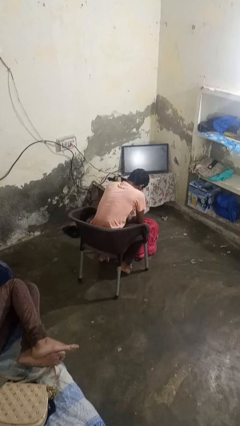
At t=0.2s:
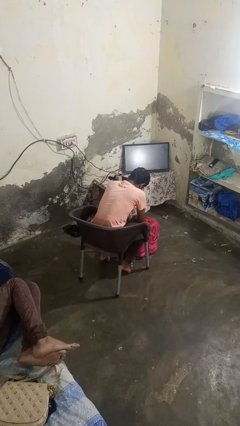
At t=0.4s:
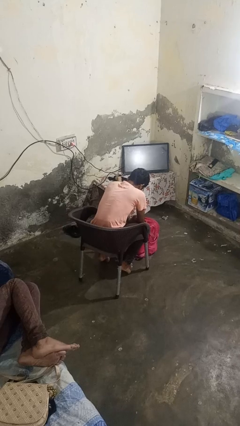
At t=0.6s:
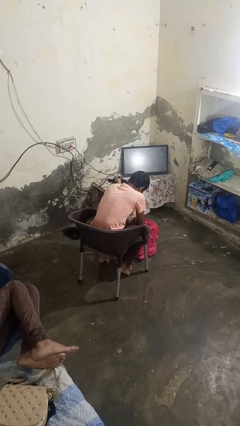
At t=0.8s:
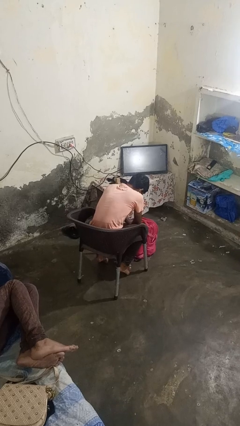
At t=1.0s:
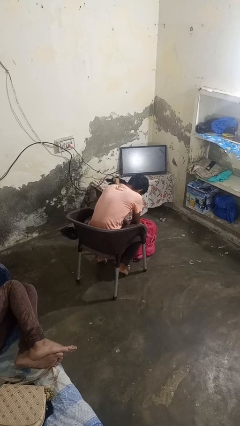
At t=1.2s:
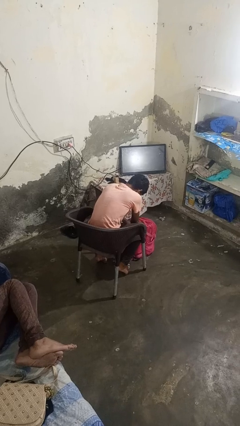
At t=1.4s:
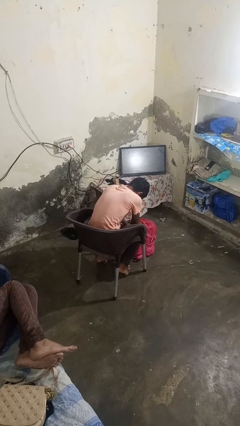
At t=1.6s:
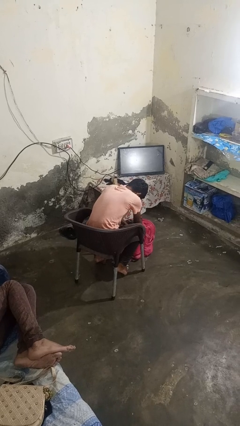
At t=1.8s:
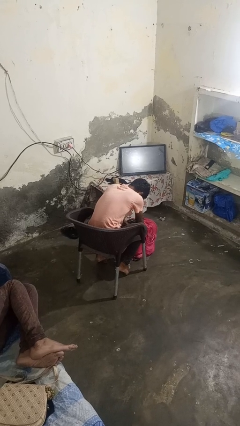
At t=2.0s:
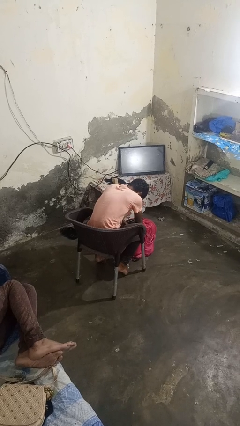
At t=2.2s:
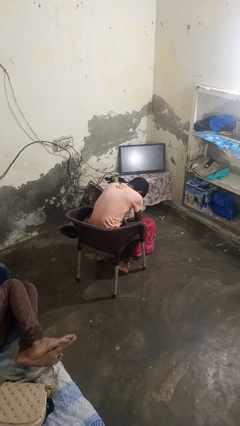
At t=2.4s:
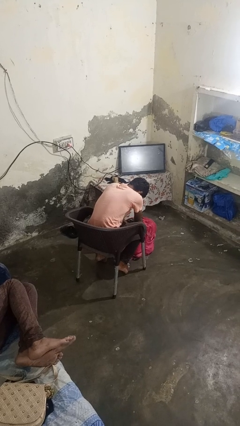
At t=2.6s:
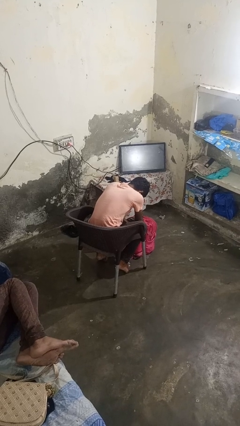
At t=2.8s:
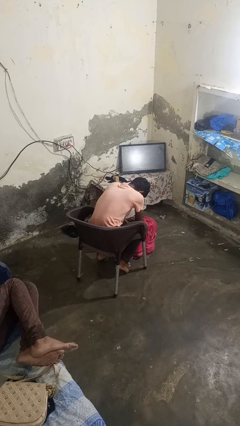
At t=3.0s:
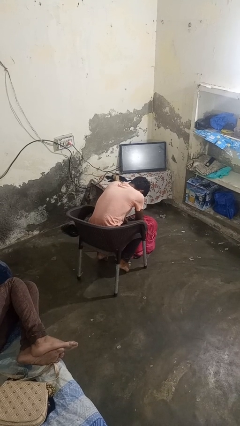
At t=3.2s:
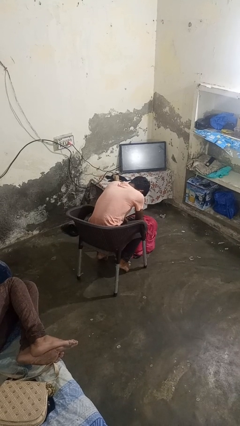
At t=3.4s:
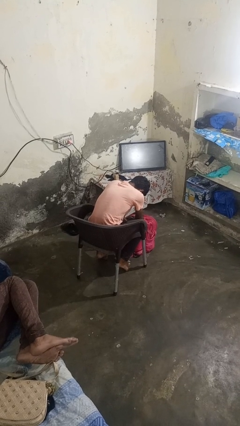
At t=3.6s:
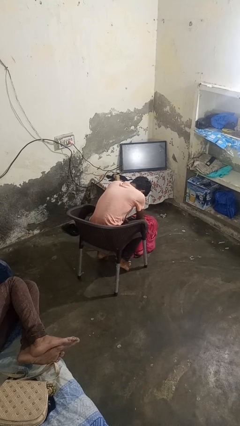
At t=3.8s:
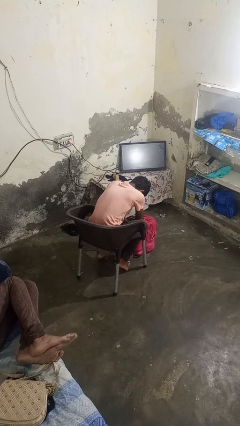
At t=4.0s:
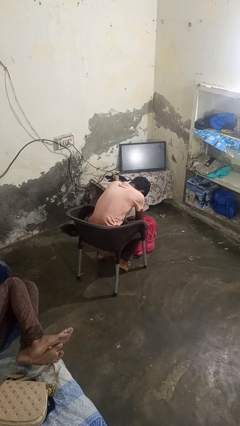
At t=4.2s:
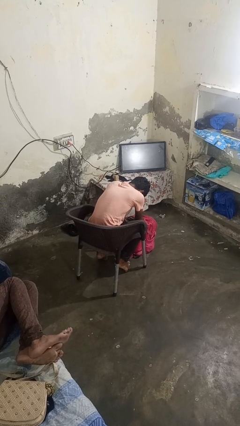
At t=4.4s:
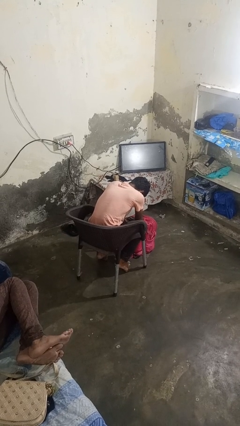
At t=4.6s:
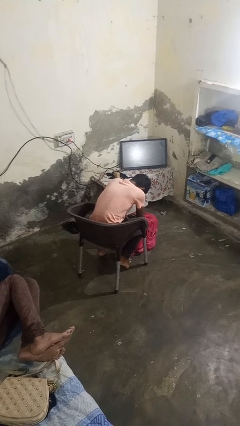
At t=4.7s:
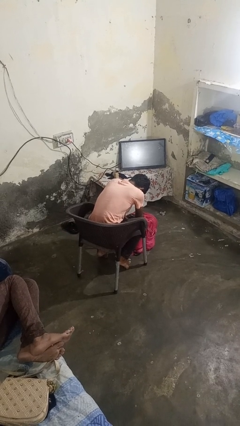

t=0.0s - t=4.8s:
person searches in backpack

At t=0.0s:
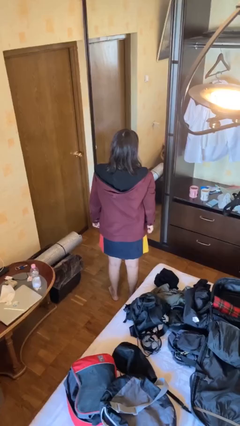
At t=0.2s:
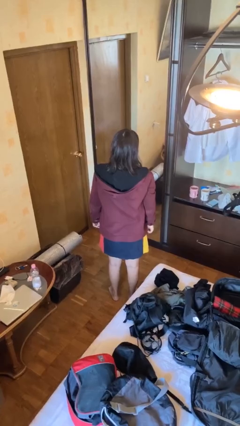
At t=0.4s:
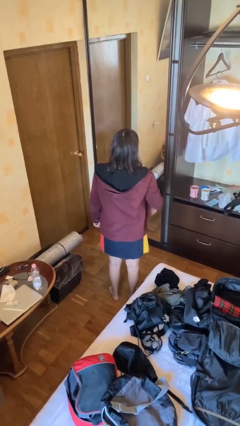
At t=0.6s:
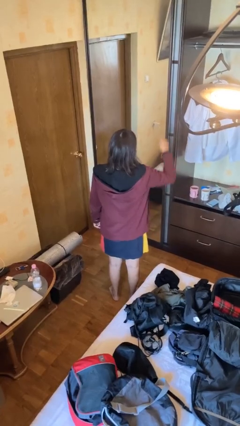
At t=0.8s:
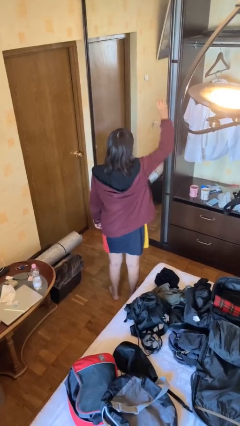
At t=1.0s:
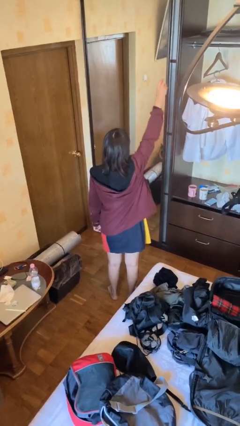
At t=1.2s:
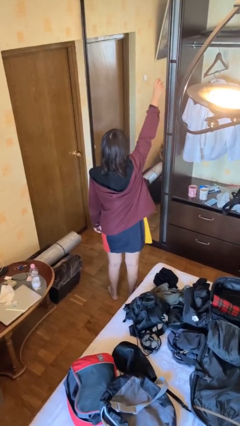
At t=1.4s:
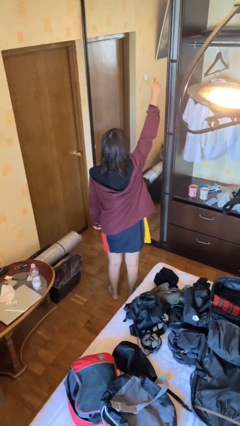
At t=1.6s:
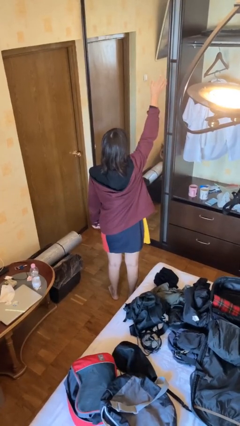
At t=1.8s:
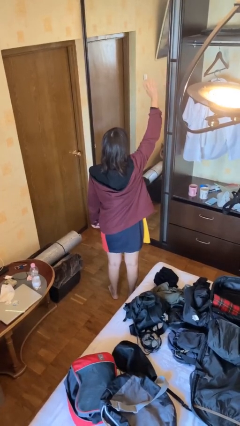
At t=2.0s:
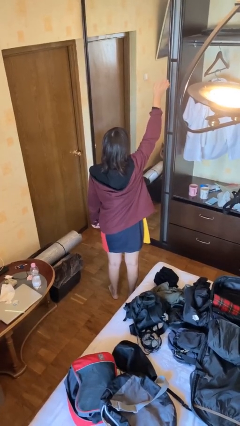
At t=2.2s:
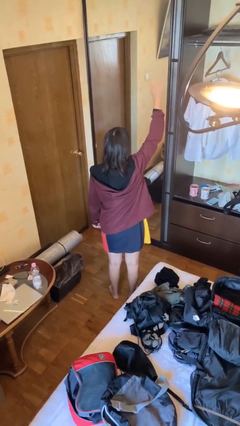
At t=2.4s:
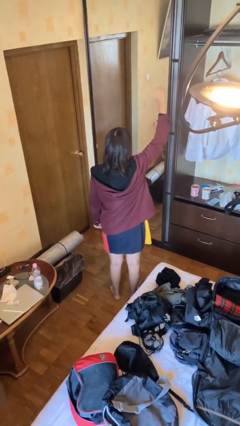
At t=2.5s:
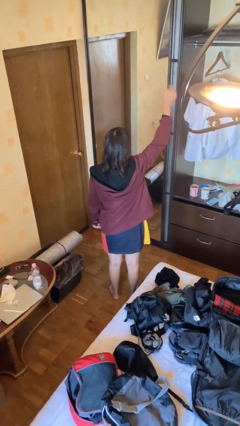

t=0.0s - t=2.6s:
person gestures raise hand

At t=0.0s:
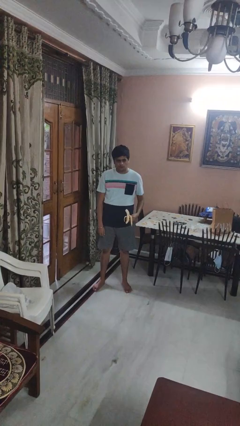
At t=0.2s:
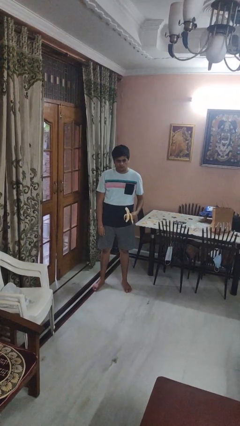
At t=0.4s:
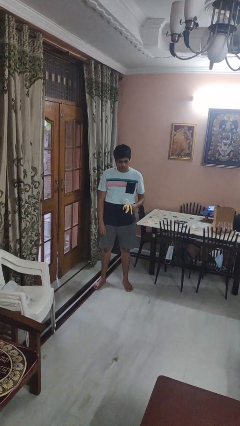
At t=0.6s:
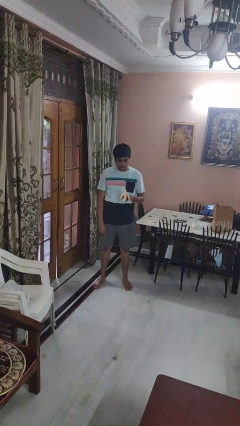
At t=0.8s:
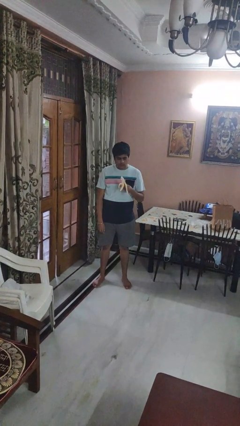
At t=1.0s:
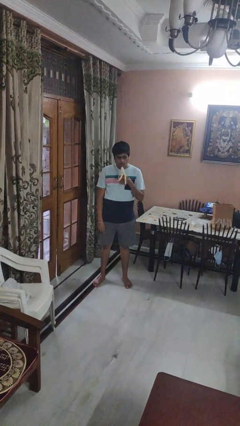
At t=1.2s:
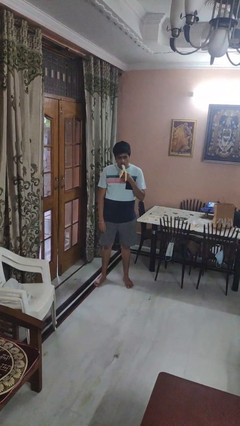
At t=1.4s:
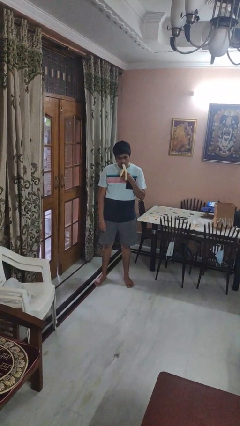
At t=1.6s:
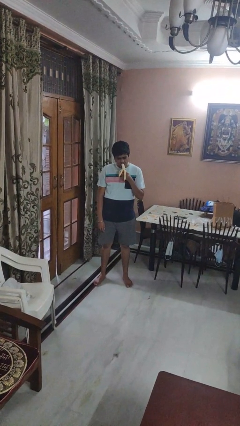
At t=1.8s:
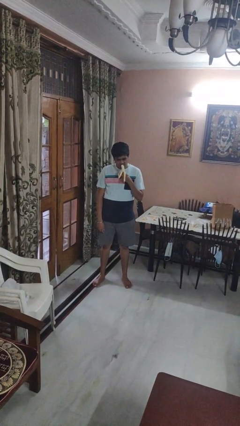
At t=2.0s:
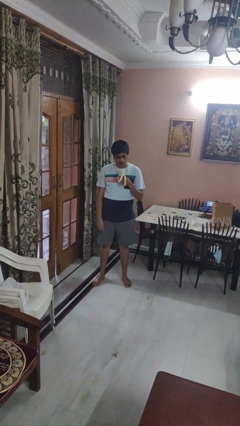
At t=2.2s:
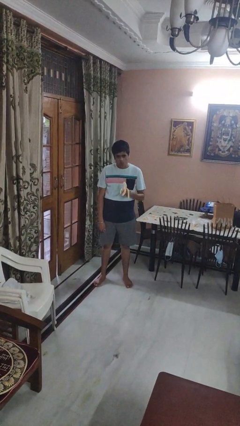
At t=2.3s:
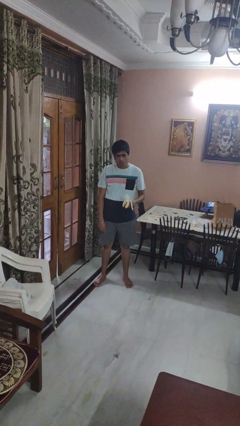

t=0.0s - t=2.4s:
person eats banana

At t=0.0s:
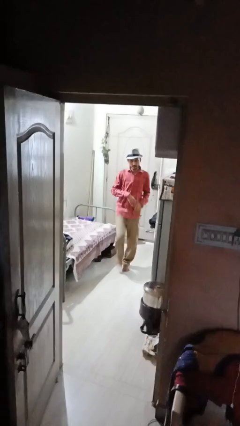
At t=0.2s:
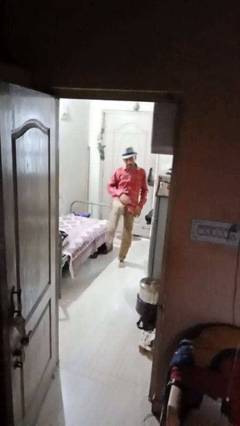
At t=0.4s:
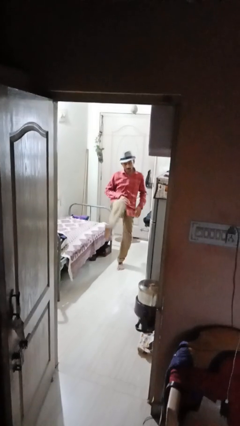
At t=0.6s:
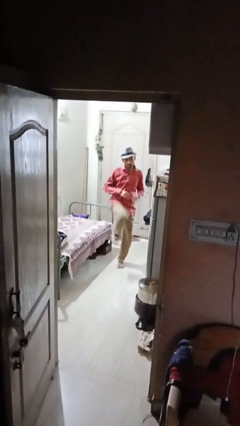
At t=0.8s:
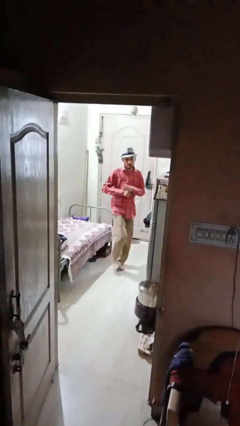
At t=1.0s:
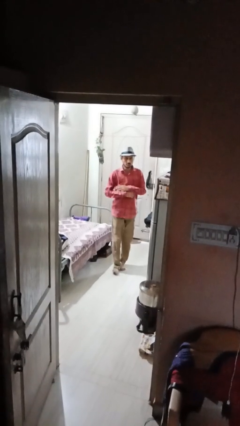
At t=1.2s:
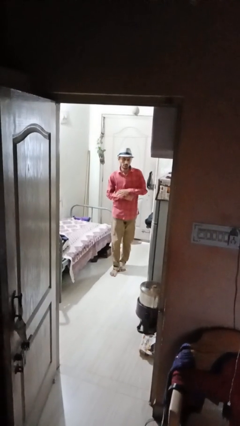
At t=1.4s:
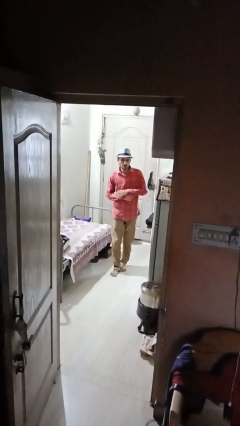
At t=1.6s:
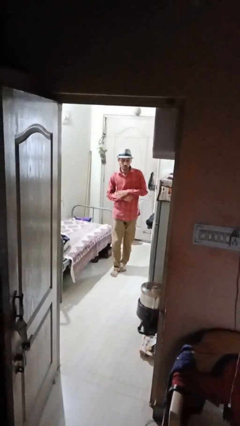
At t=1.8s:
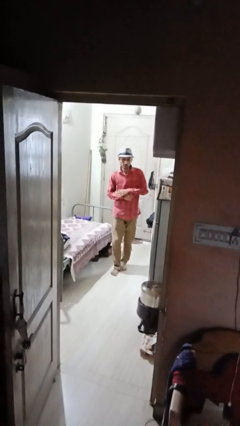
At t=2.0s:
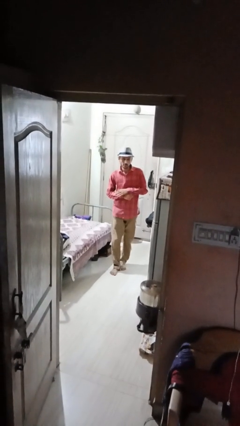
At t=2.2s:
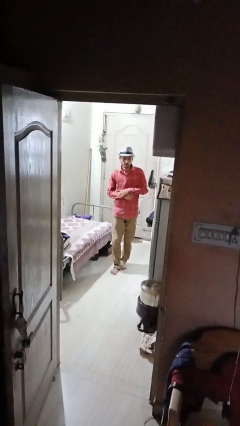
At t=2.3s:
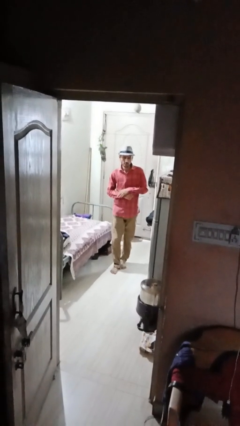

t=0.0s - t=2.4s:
person karate kicks

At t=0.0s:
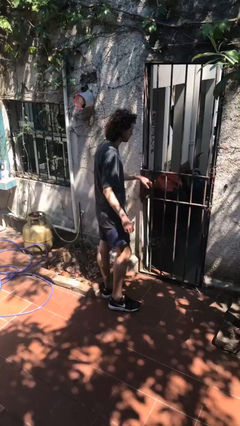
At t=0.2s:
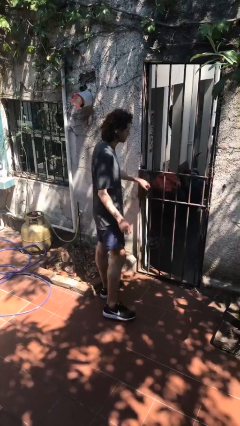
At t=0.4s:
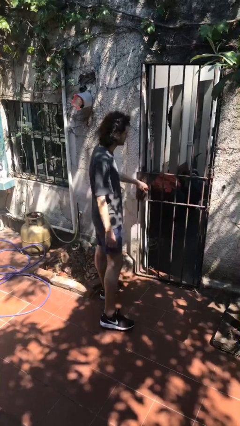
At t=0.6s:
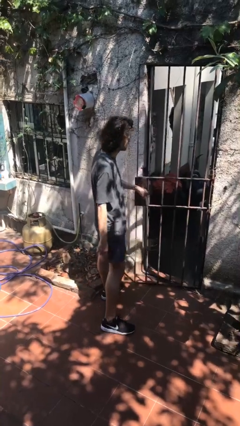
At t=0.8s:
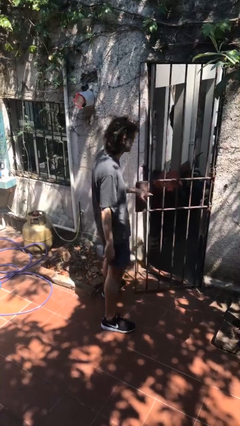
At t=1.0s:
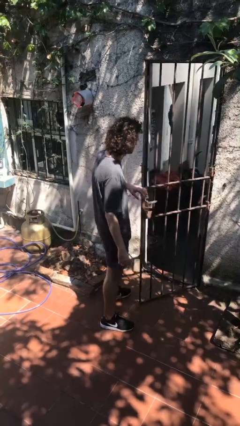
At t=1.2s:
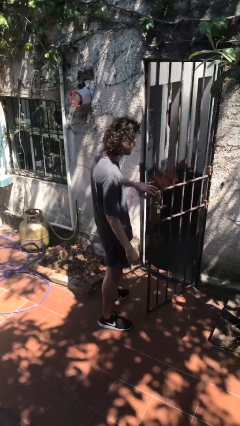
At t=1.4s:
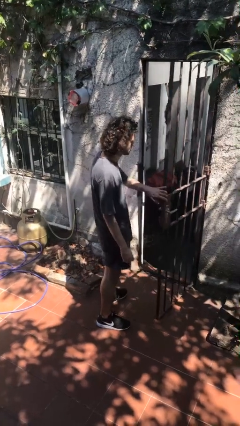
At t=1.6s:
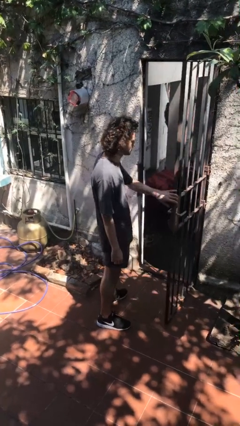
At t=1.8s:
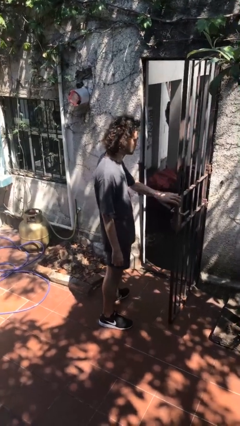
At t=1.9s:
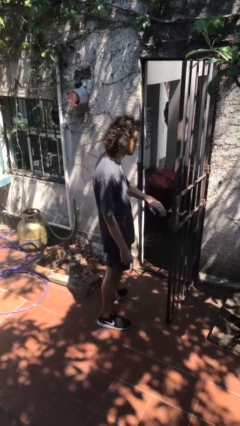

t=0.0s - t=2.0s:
person opens facility door

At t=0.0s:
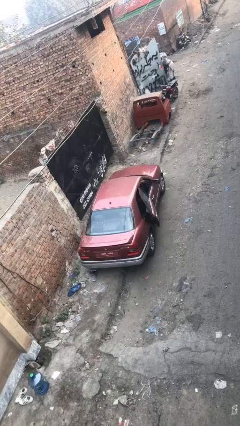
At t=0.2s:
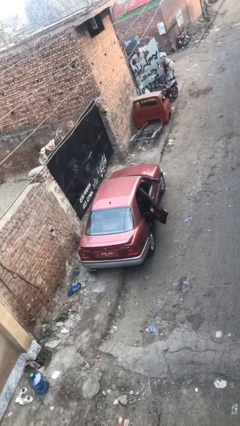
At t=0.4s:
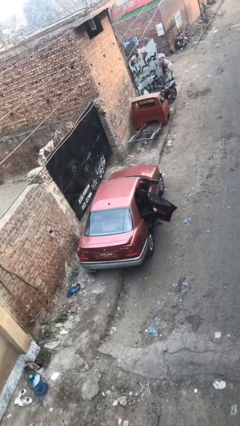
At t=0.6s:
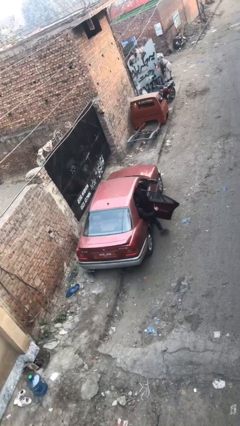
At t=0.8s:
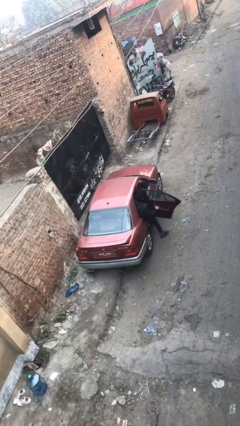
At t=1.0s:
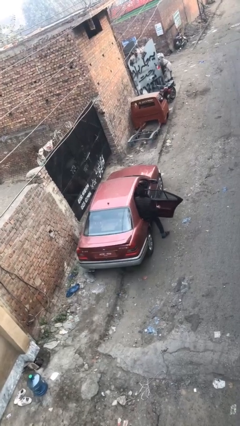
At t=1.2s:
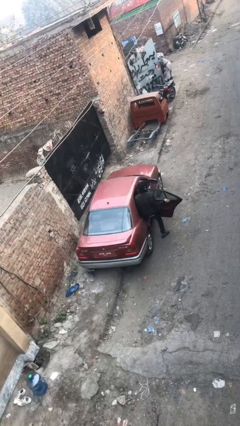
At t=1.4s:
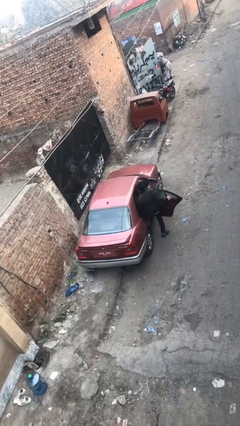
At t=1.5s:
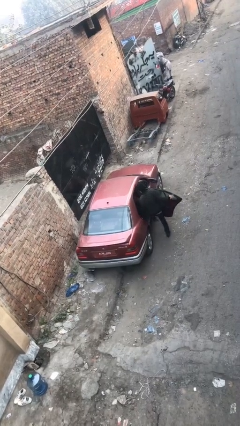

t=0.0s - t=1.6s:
car drops off person

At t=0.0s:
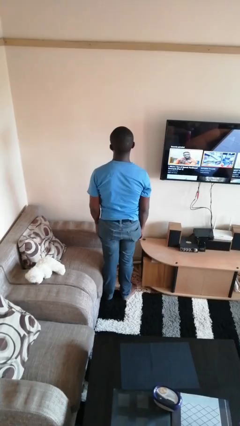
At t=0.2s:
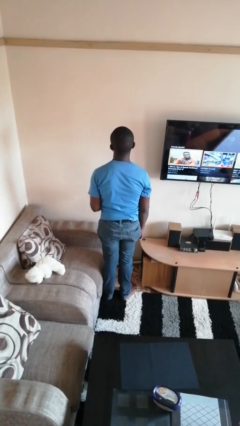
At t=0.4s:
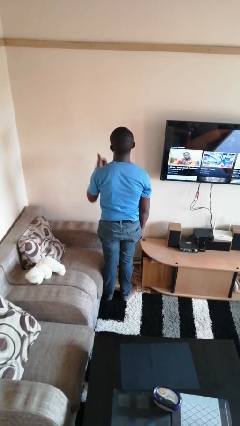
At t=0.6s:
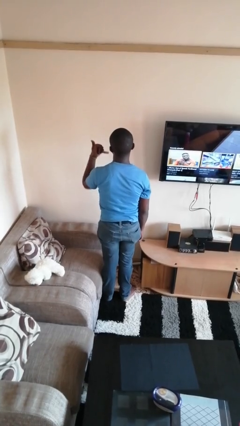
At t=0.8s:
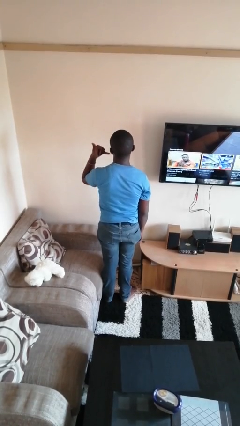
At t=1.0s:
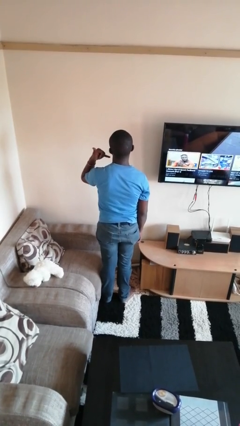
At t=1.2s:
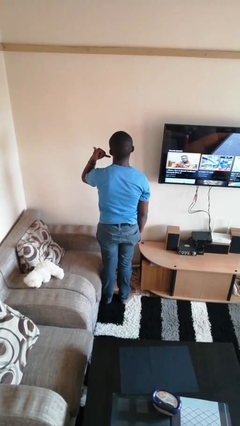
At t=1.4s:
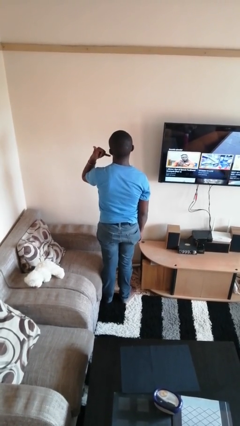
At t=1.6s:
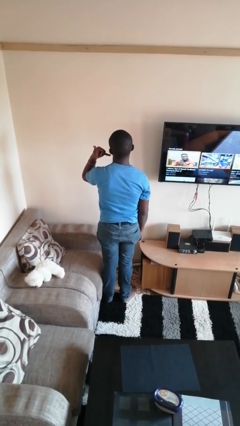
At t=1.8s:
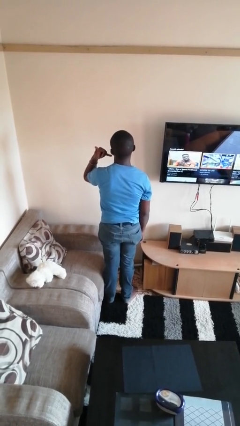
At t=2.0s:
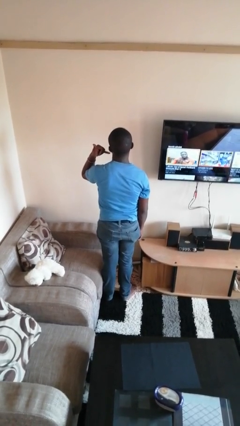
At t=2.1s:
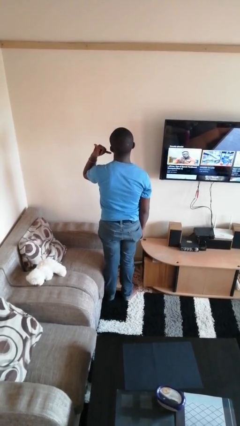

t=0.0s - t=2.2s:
person gestures call me
